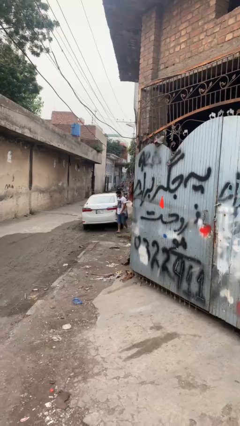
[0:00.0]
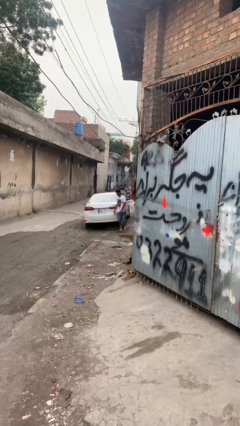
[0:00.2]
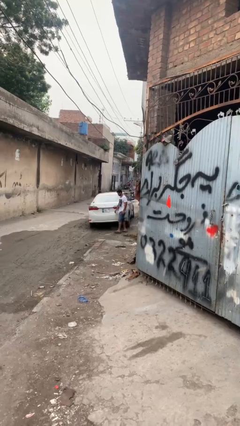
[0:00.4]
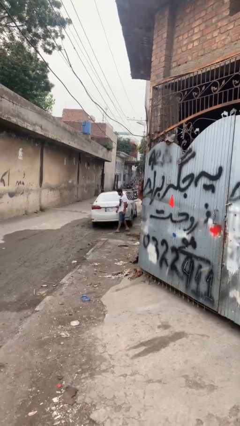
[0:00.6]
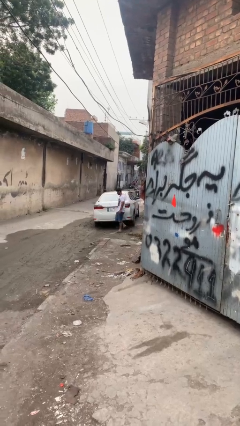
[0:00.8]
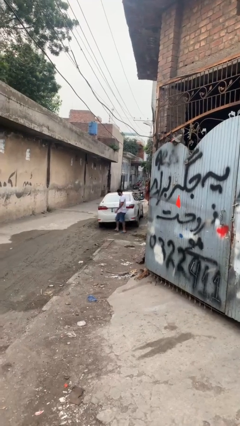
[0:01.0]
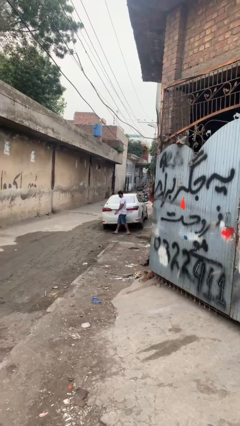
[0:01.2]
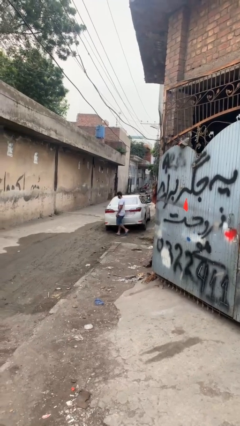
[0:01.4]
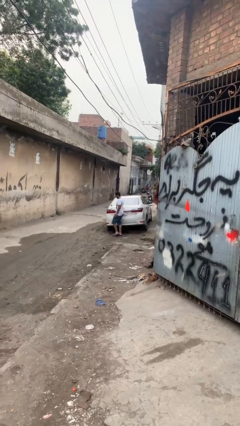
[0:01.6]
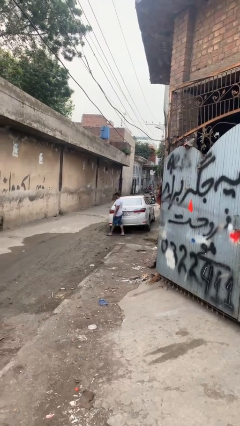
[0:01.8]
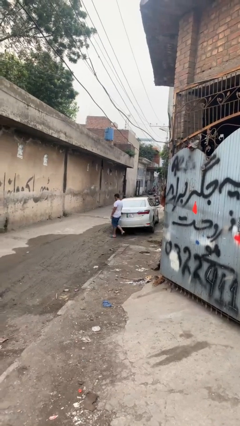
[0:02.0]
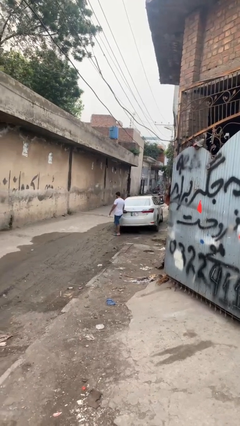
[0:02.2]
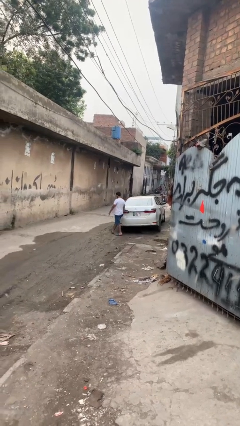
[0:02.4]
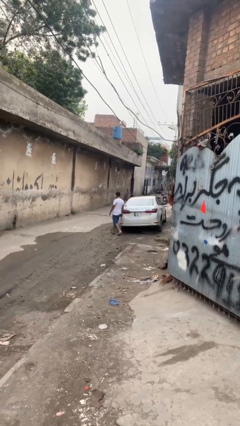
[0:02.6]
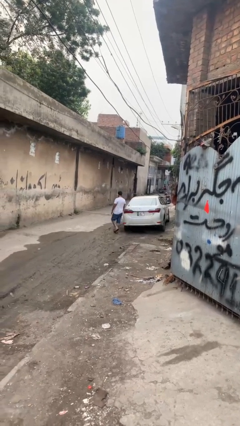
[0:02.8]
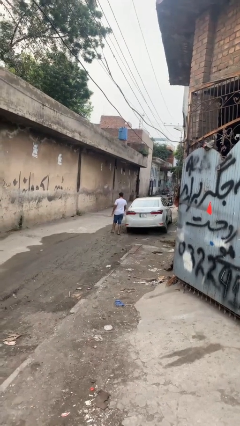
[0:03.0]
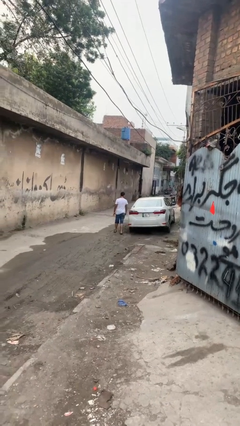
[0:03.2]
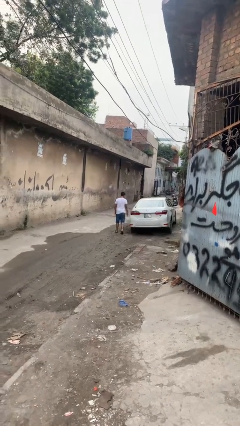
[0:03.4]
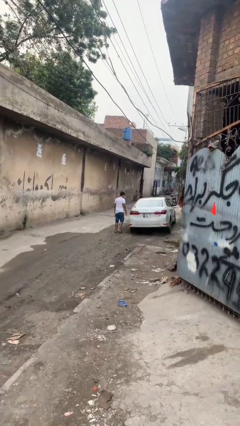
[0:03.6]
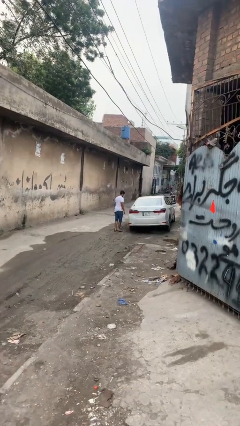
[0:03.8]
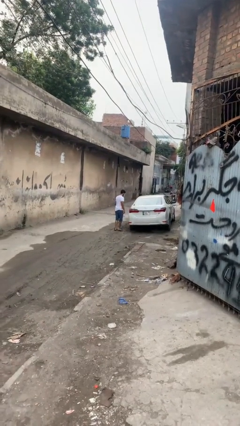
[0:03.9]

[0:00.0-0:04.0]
person walks around car

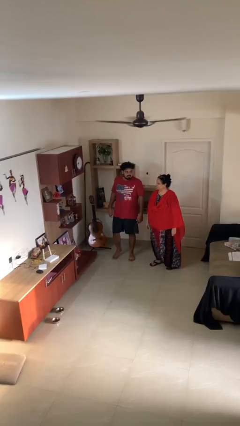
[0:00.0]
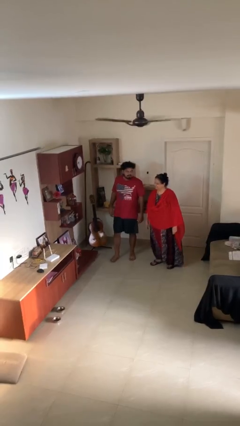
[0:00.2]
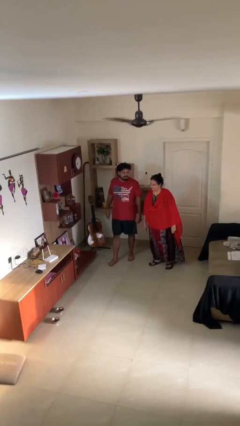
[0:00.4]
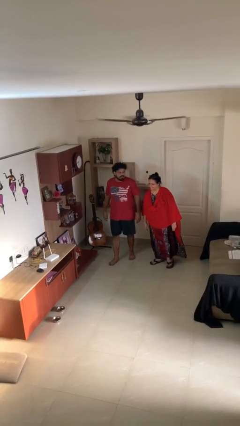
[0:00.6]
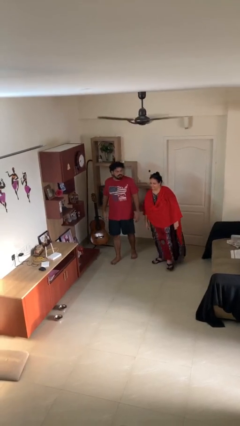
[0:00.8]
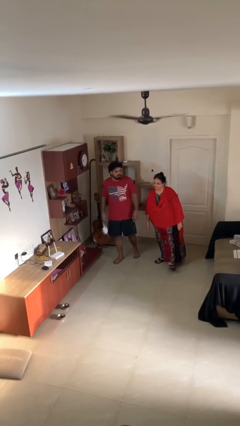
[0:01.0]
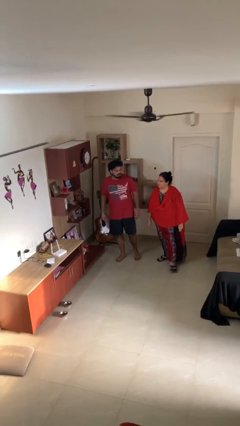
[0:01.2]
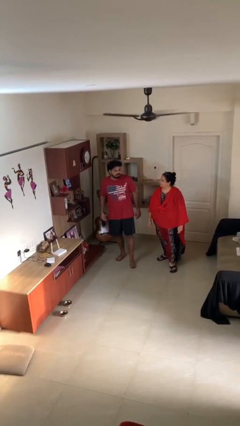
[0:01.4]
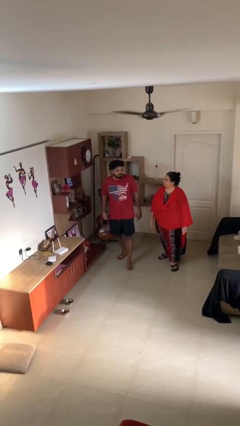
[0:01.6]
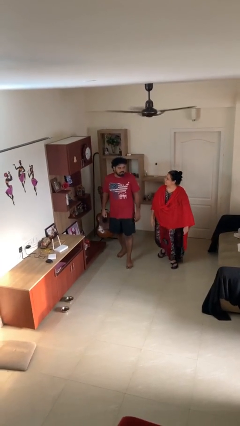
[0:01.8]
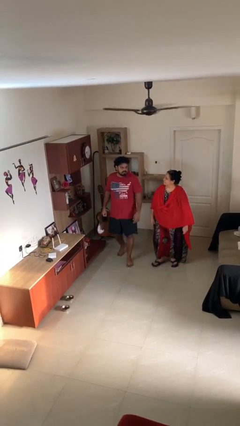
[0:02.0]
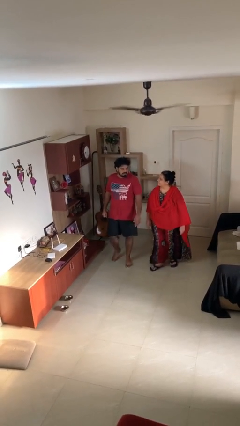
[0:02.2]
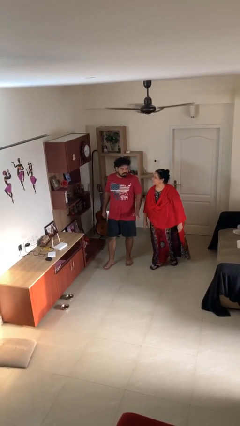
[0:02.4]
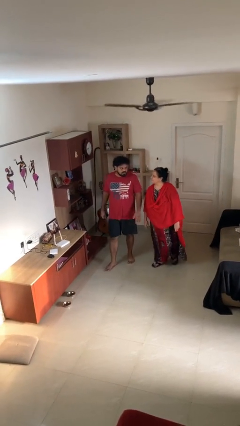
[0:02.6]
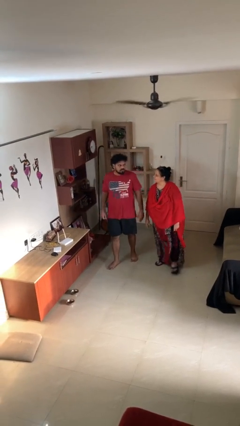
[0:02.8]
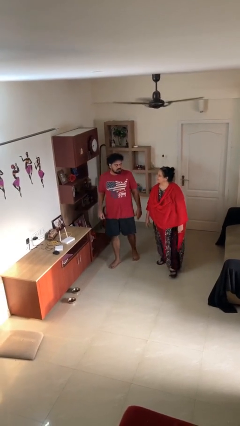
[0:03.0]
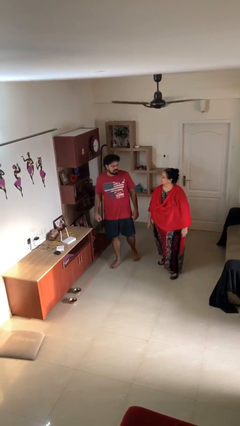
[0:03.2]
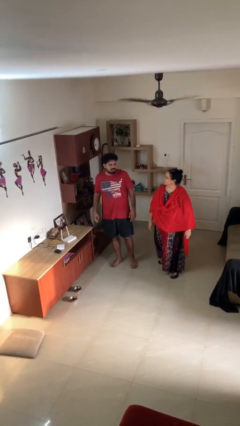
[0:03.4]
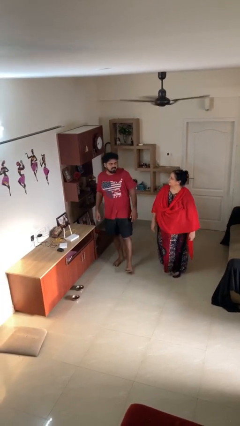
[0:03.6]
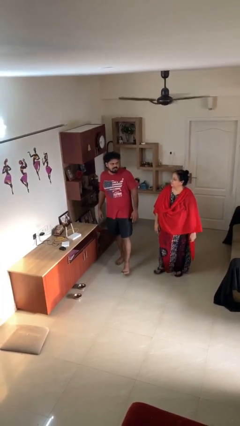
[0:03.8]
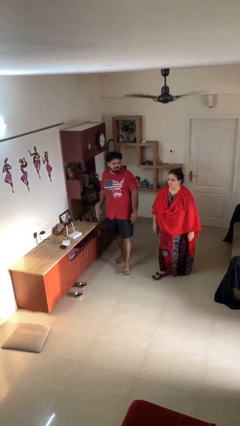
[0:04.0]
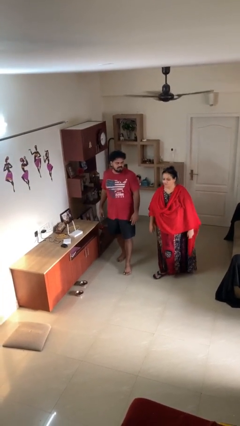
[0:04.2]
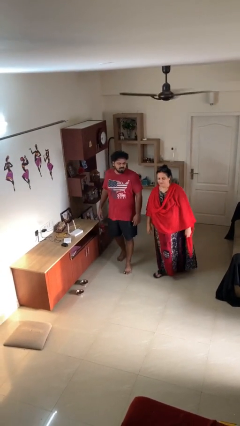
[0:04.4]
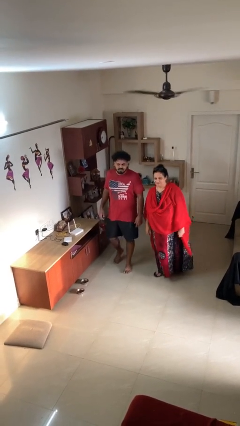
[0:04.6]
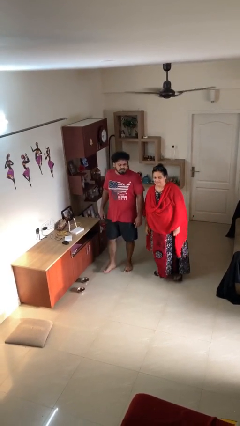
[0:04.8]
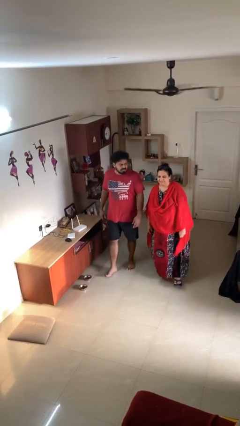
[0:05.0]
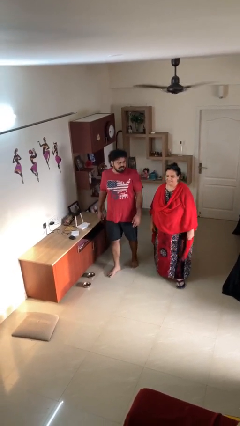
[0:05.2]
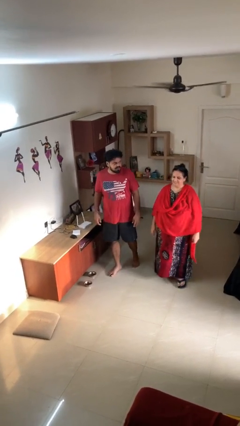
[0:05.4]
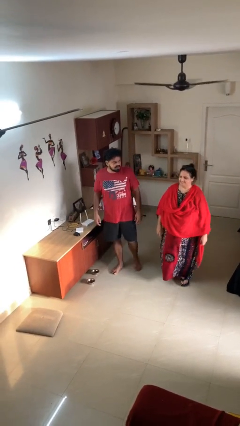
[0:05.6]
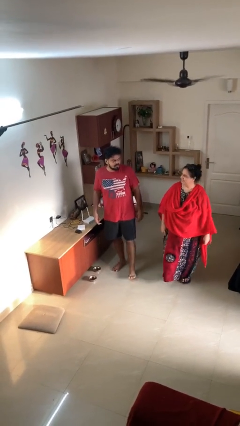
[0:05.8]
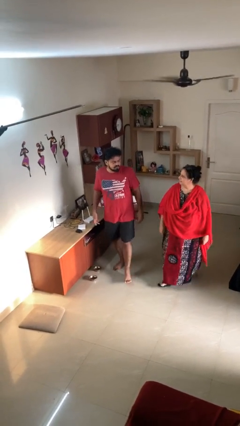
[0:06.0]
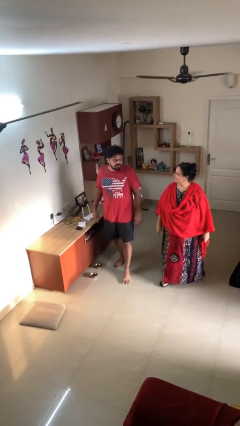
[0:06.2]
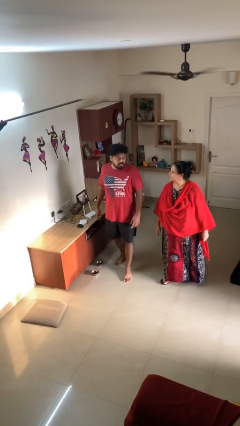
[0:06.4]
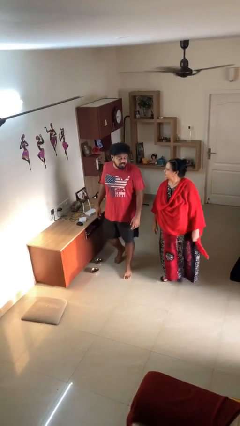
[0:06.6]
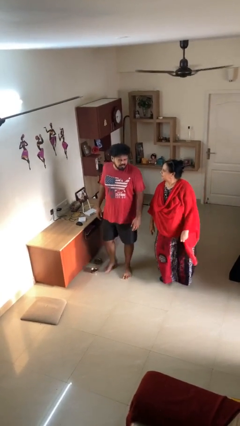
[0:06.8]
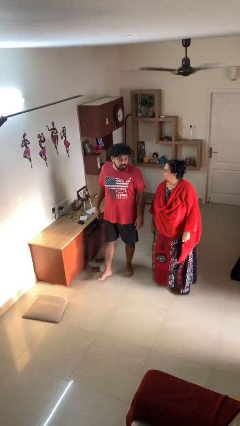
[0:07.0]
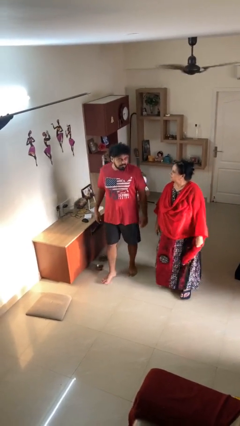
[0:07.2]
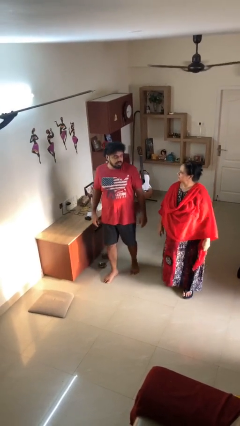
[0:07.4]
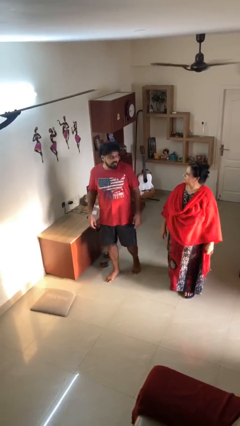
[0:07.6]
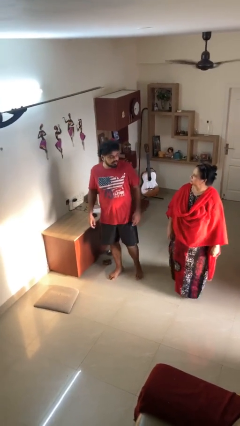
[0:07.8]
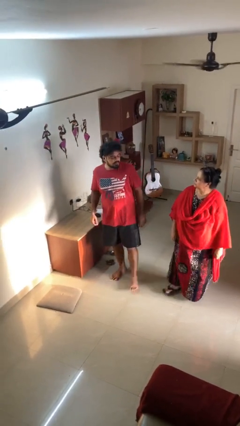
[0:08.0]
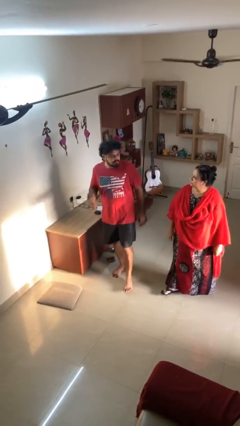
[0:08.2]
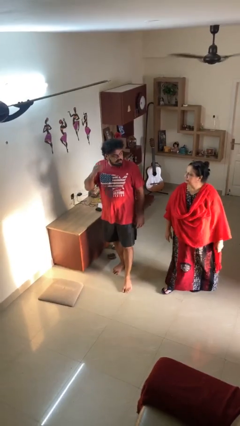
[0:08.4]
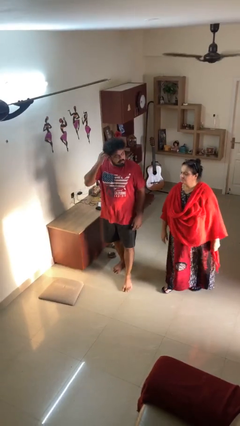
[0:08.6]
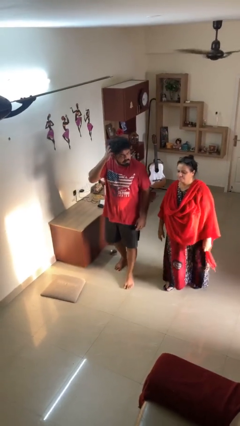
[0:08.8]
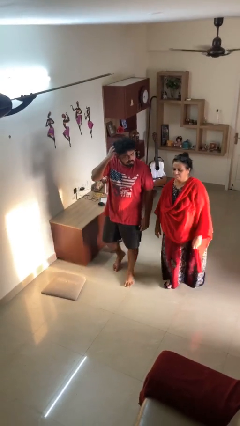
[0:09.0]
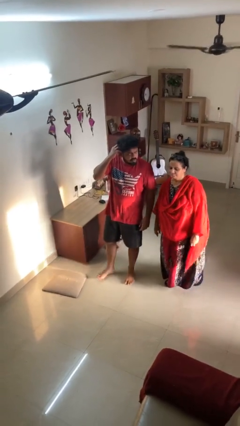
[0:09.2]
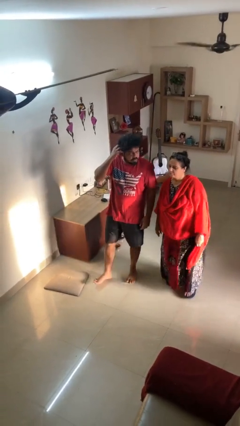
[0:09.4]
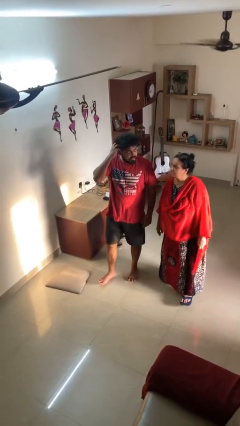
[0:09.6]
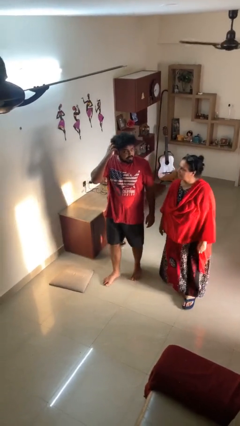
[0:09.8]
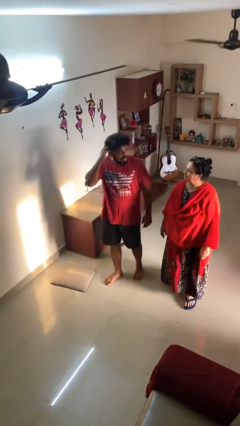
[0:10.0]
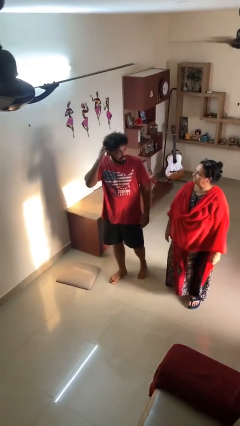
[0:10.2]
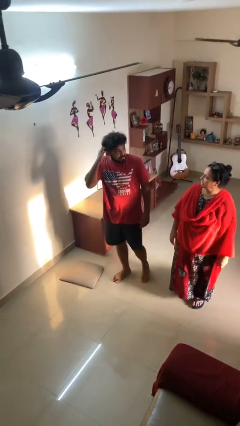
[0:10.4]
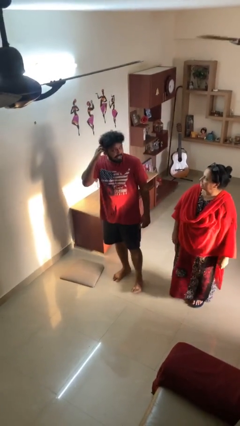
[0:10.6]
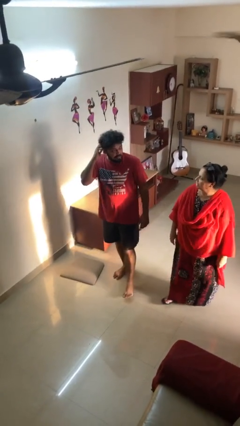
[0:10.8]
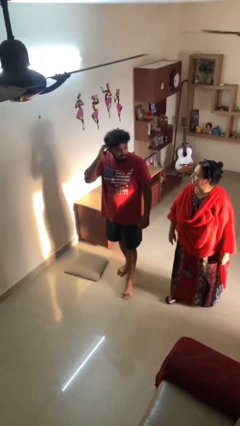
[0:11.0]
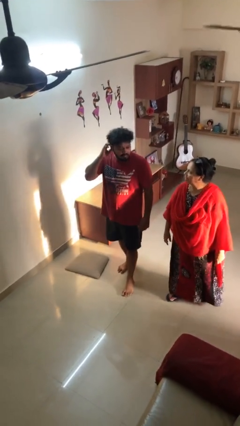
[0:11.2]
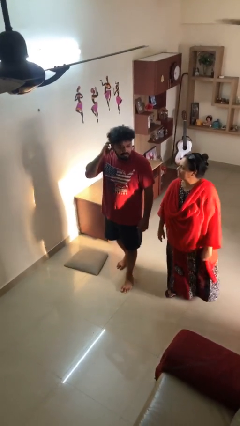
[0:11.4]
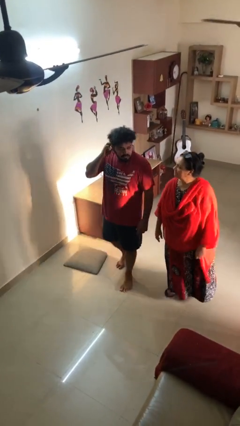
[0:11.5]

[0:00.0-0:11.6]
person talks to person

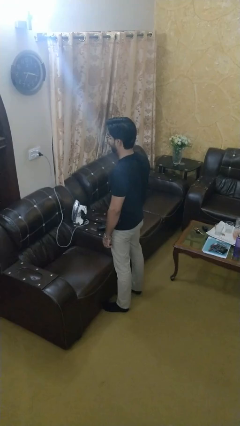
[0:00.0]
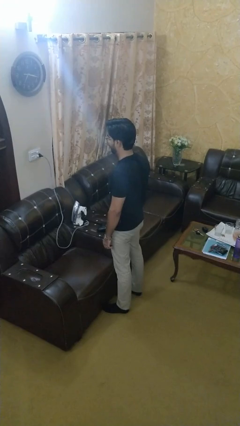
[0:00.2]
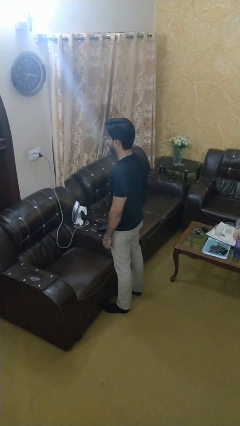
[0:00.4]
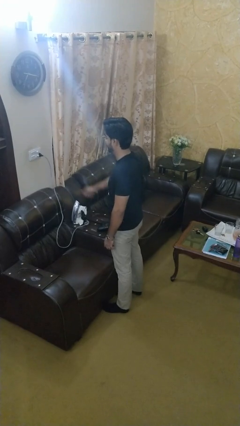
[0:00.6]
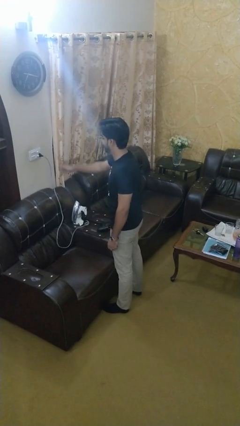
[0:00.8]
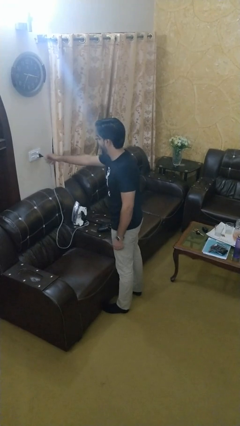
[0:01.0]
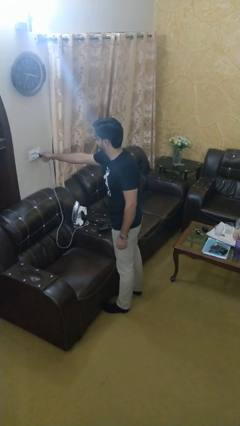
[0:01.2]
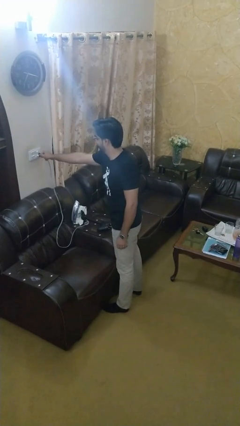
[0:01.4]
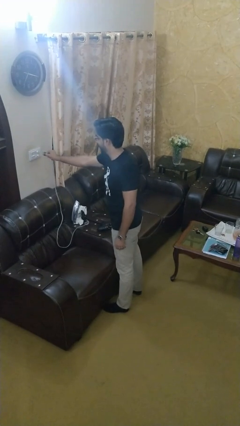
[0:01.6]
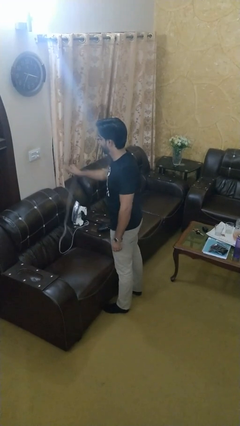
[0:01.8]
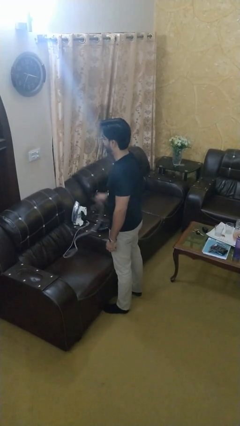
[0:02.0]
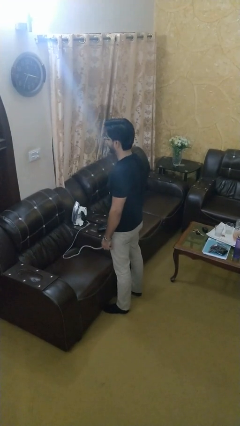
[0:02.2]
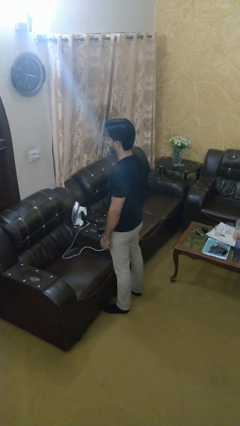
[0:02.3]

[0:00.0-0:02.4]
person unplugs from electrical socket
